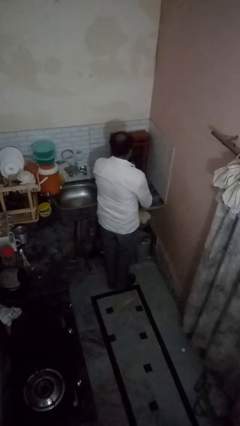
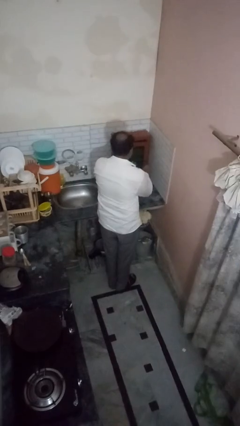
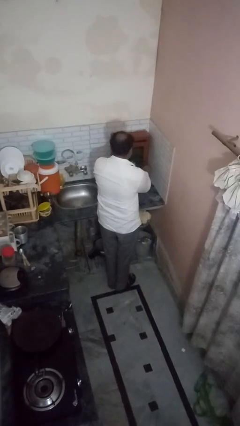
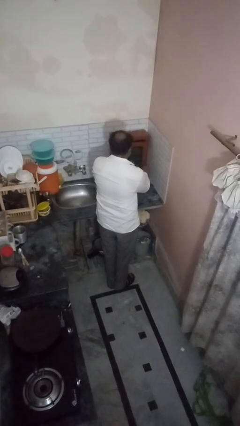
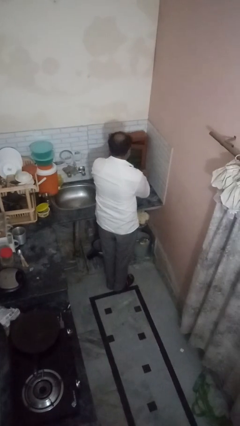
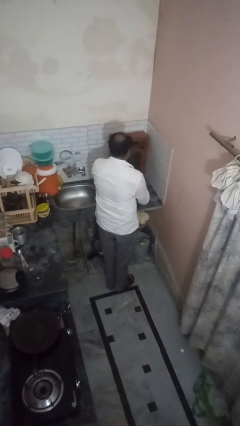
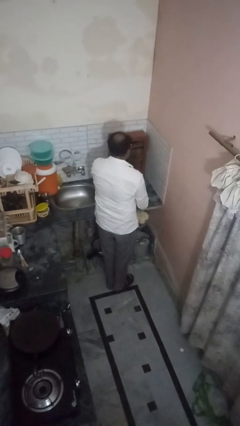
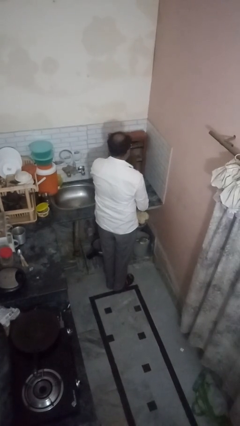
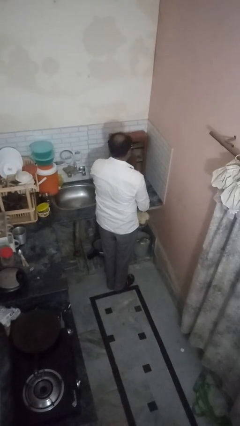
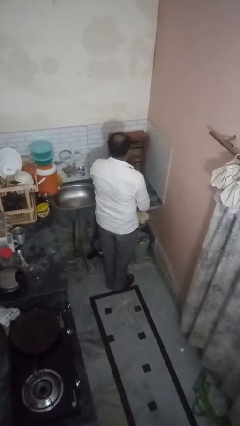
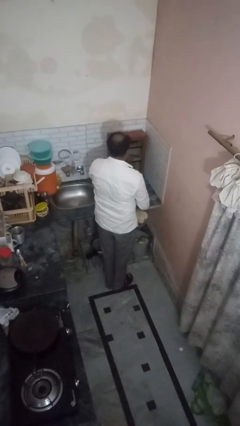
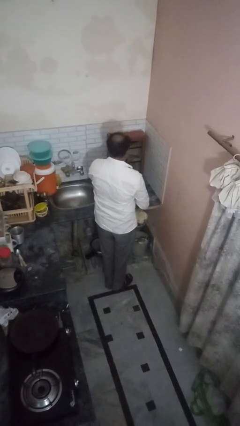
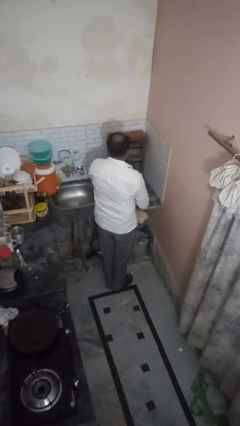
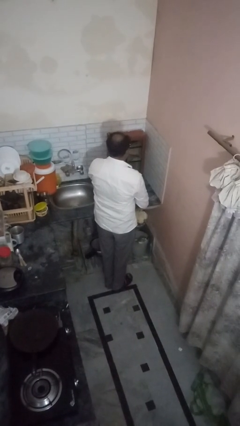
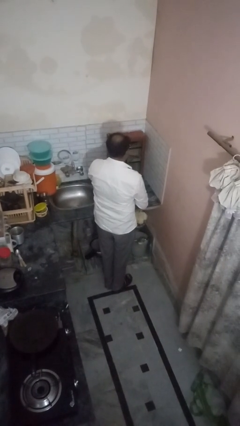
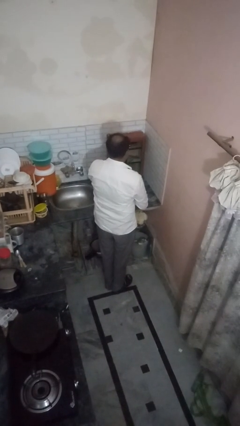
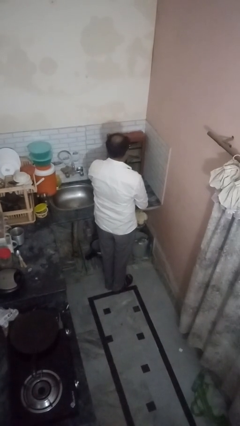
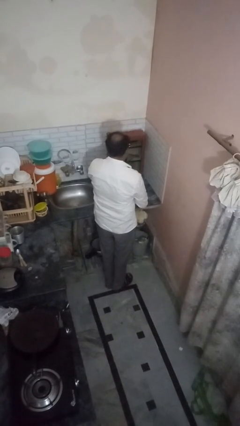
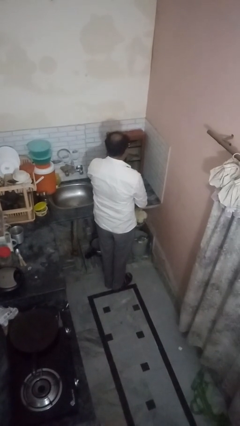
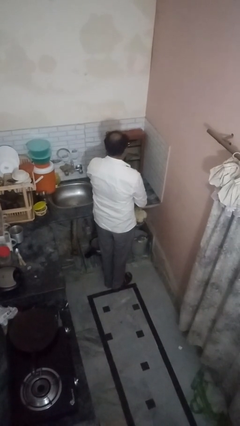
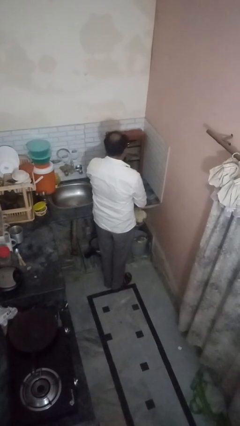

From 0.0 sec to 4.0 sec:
person opens kitchen drawer

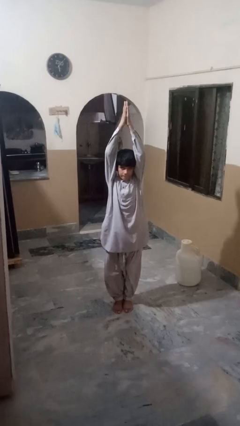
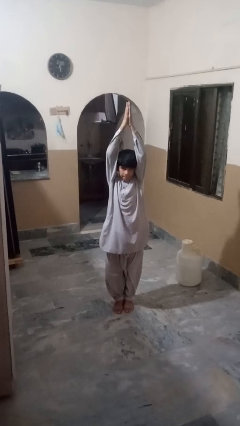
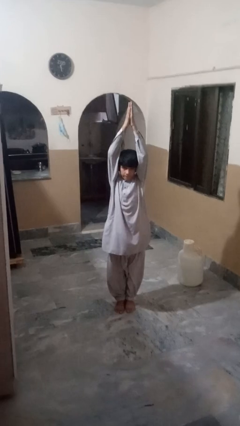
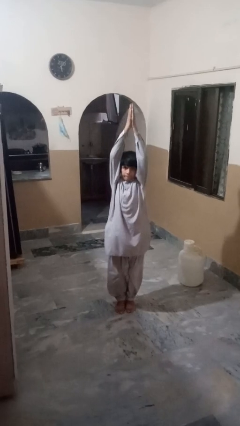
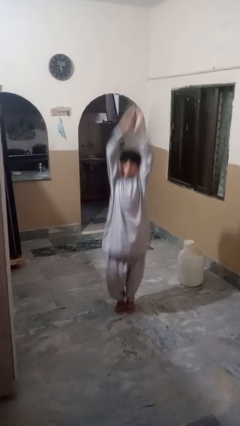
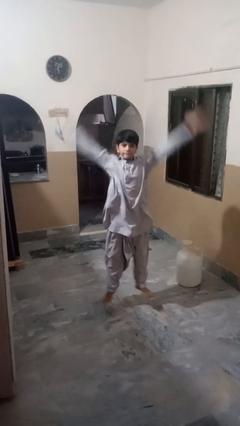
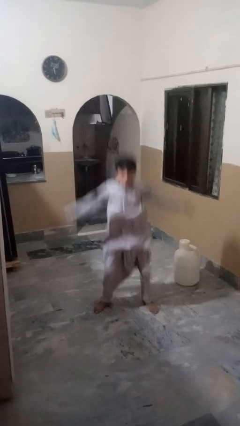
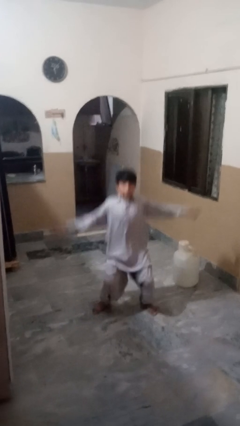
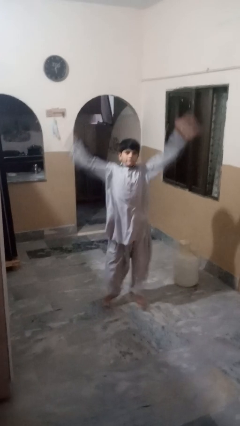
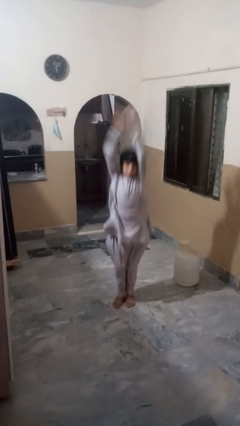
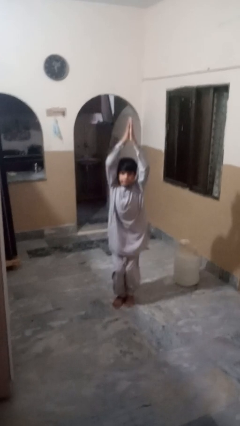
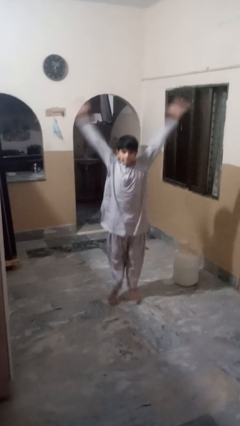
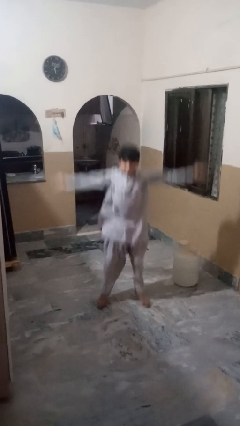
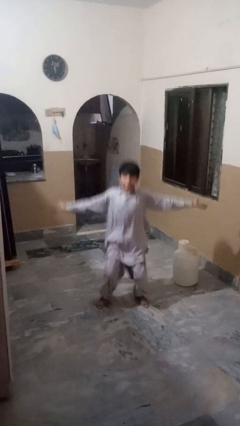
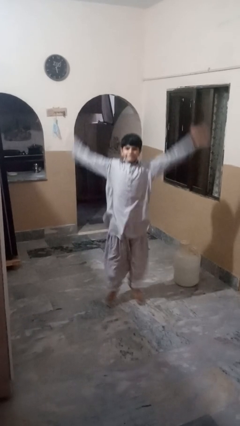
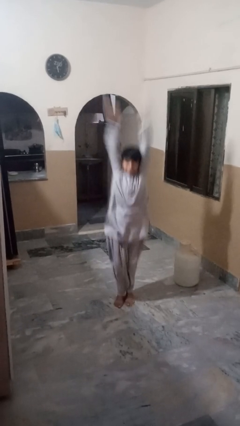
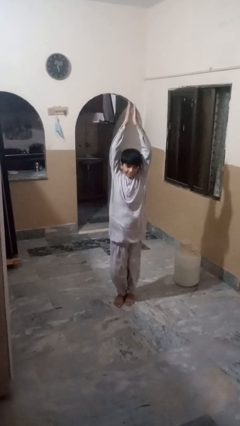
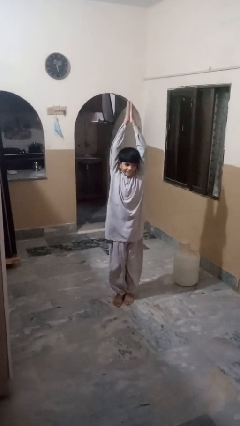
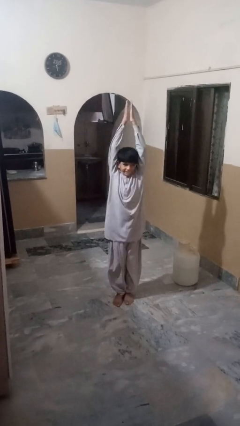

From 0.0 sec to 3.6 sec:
person exercises with jumping jacks

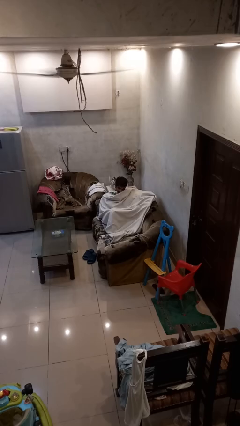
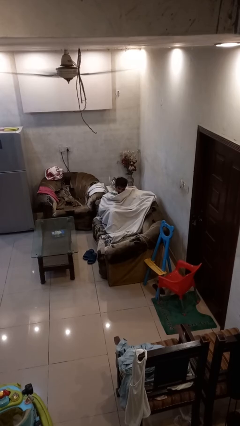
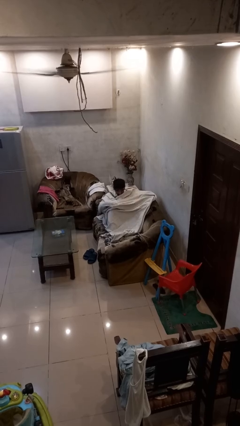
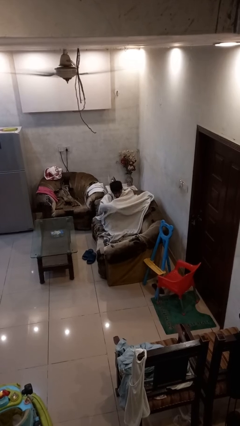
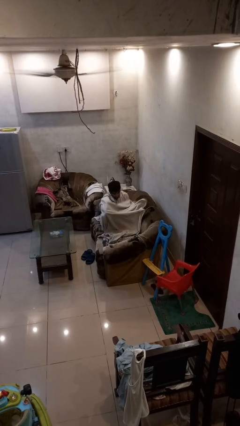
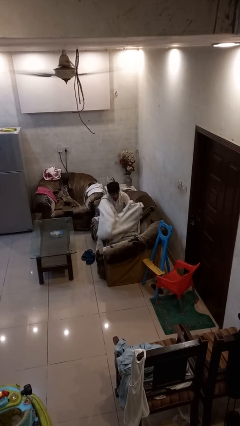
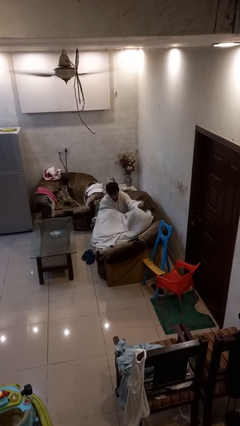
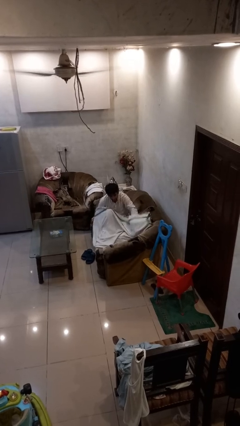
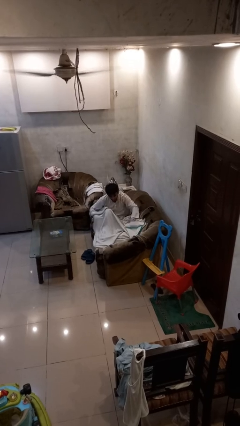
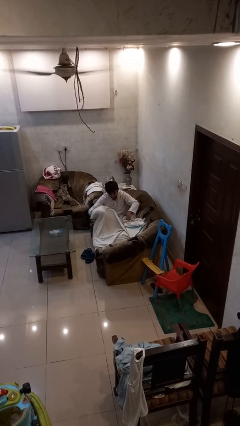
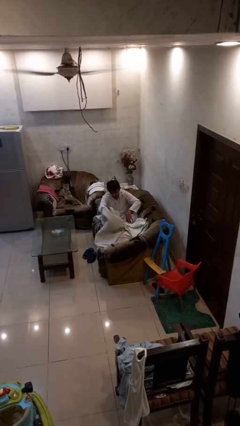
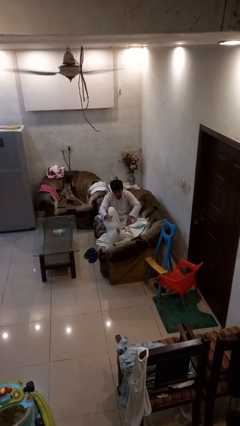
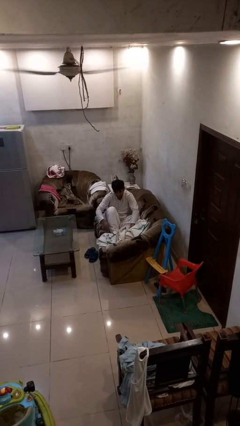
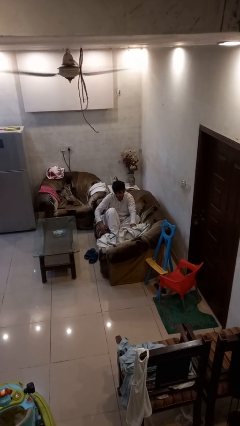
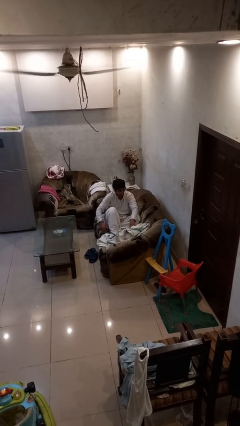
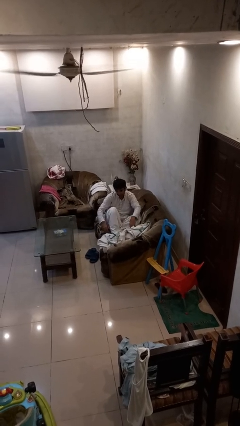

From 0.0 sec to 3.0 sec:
person uncovers with blanket

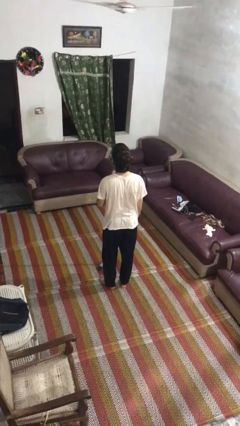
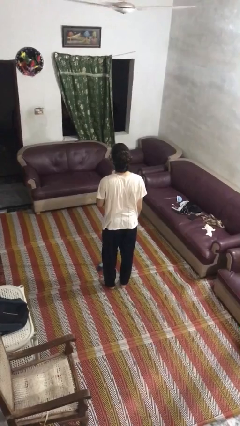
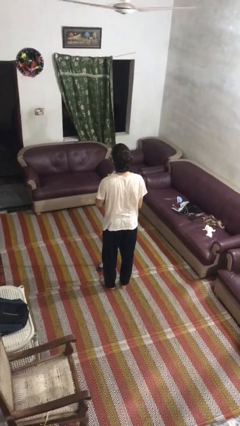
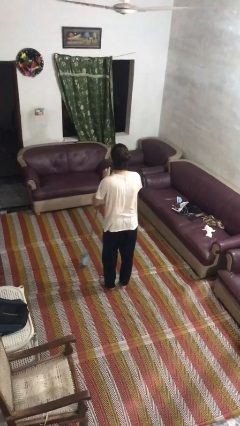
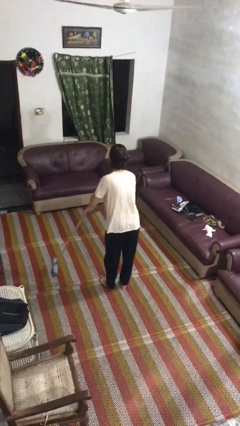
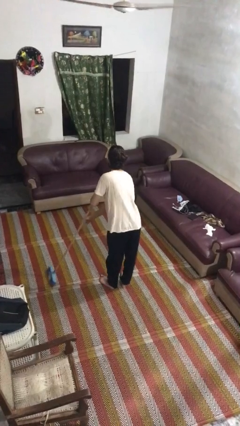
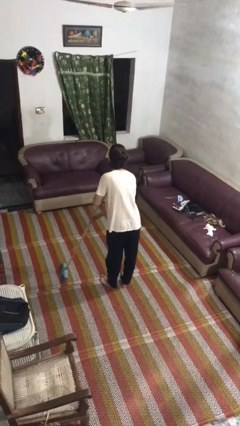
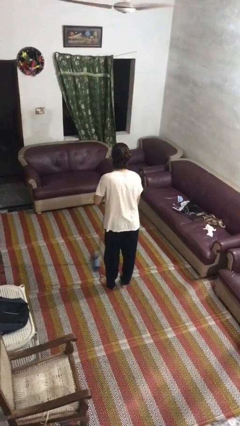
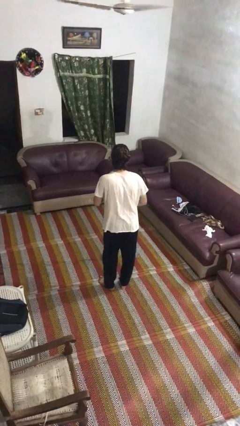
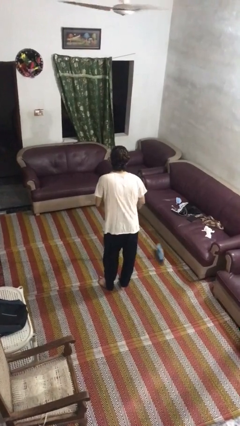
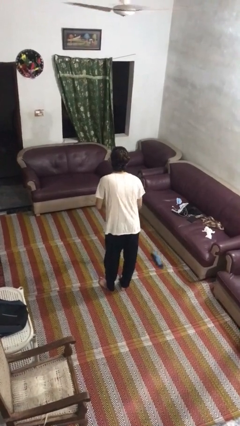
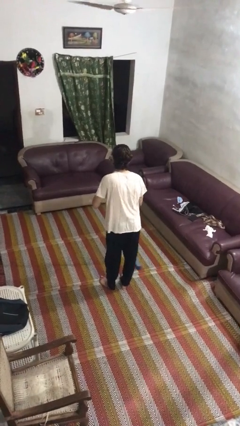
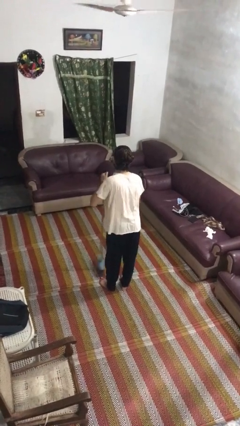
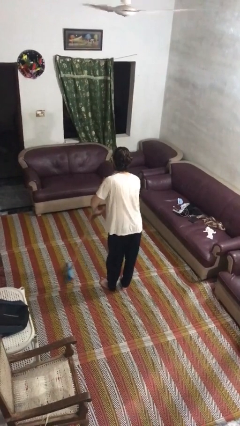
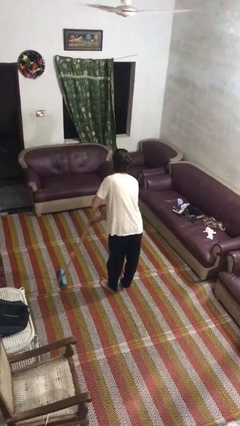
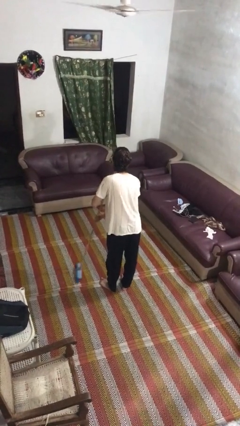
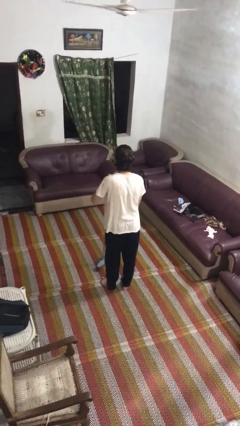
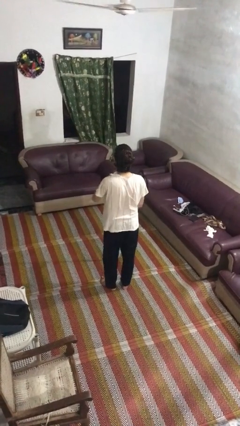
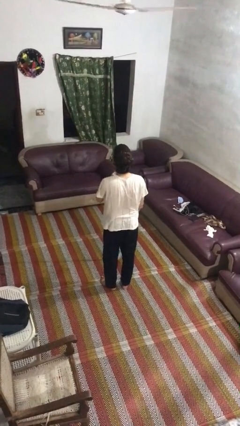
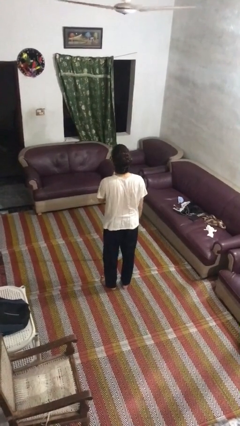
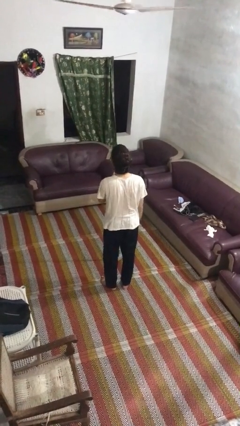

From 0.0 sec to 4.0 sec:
person sweeps floor

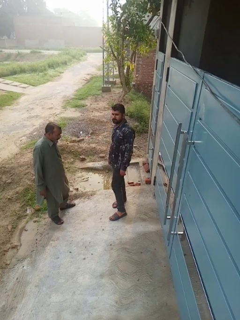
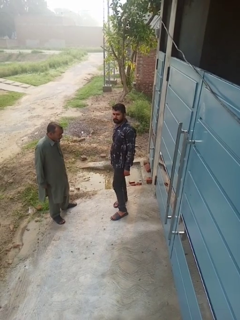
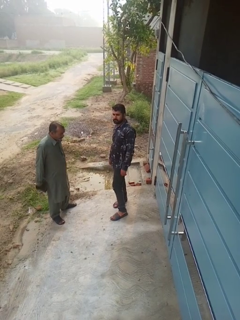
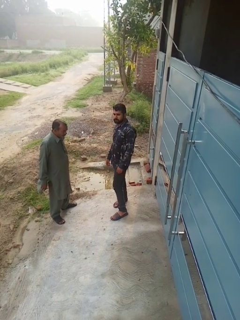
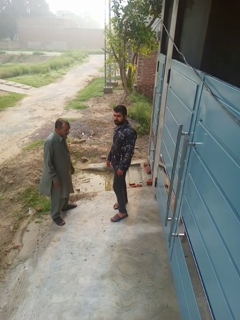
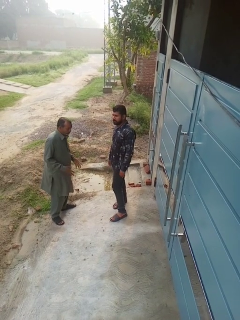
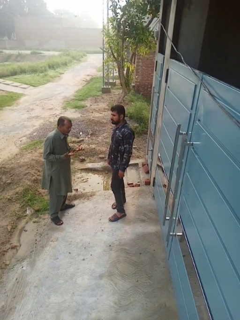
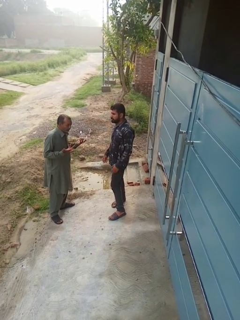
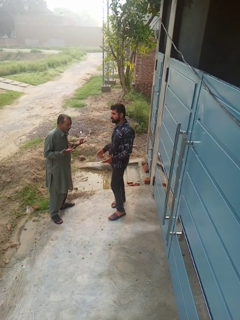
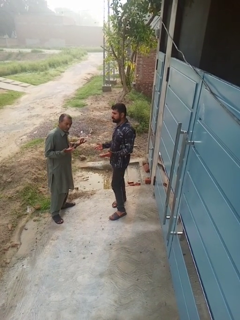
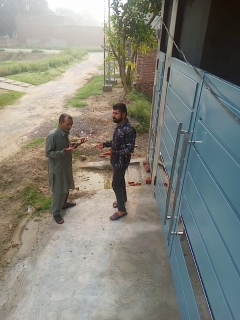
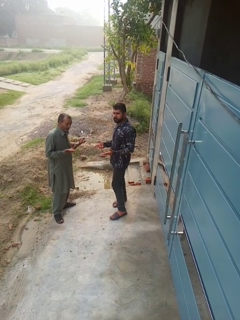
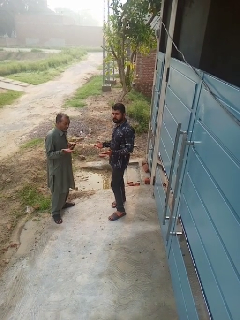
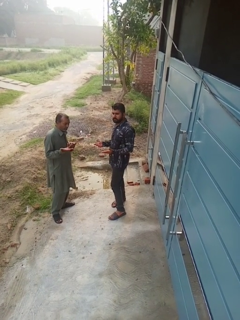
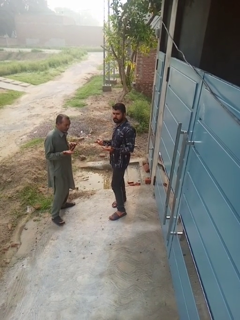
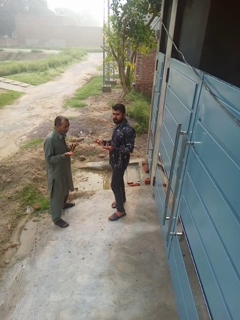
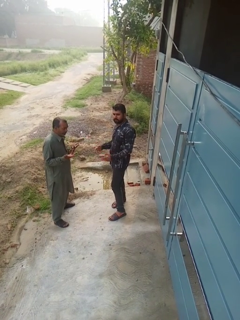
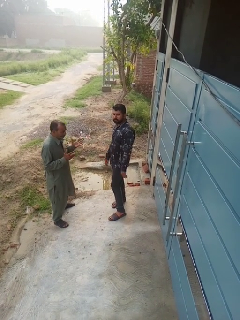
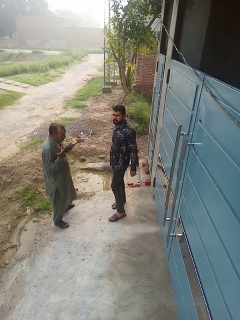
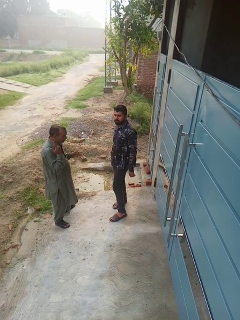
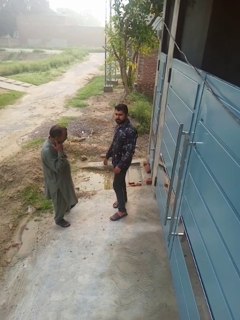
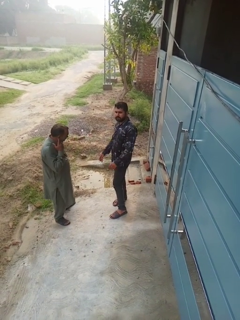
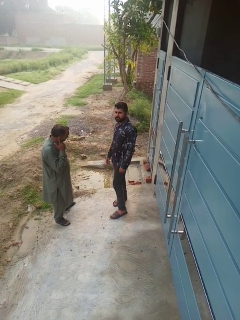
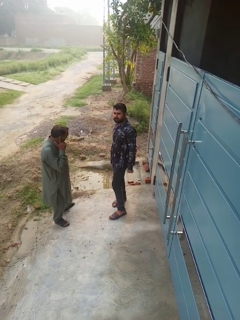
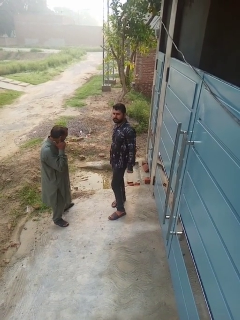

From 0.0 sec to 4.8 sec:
person talks to person
